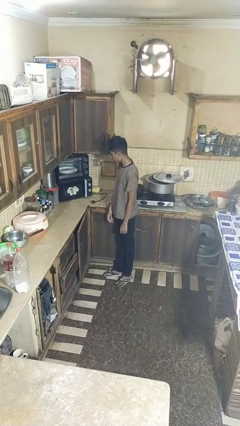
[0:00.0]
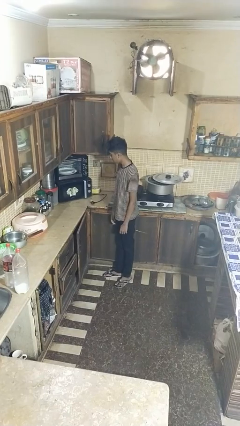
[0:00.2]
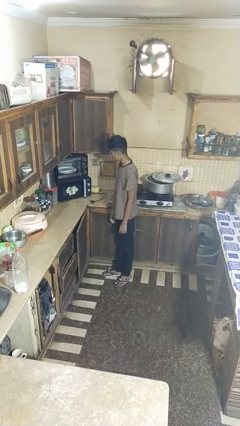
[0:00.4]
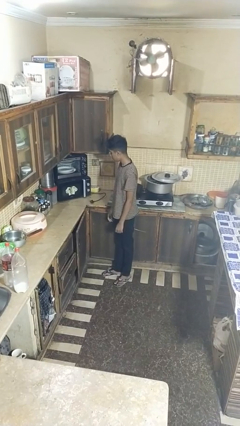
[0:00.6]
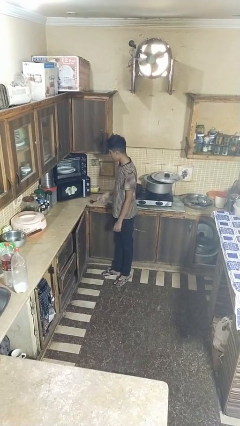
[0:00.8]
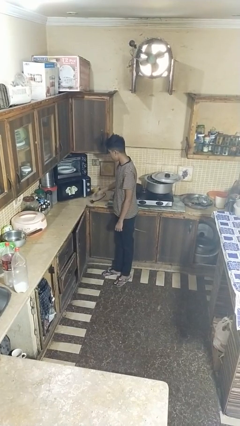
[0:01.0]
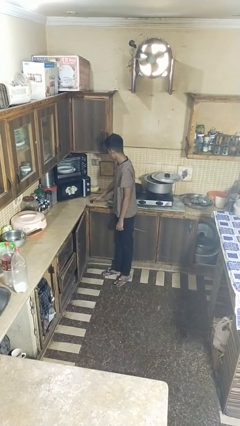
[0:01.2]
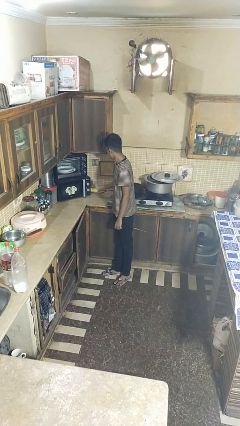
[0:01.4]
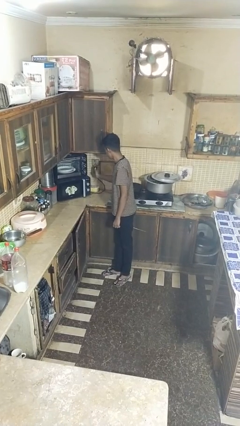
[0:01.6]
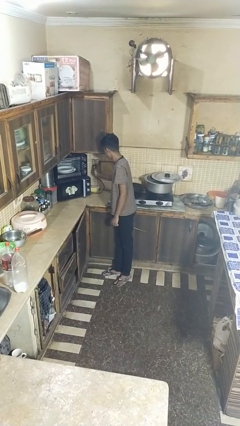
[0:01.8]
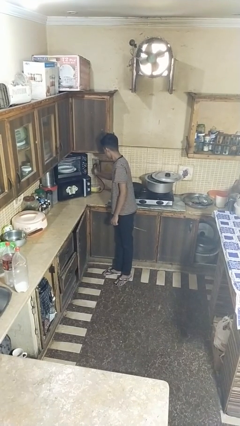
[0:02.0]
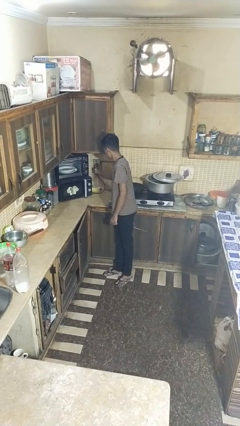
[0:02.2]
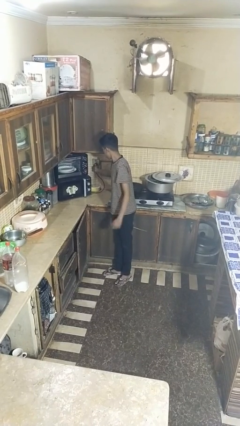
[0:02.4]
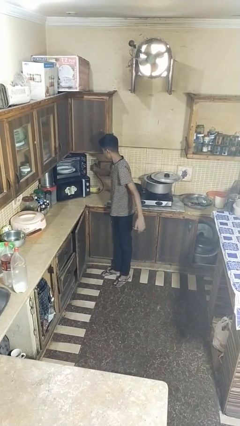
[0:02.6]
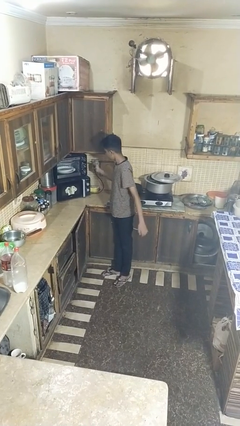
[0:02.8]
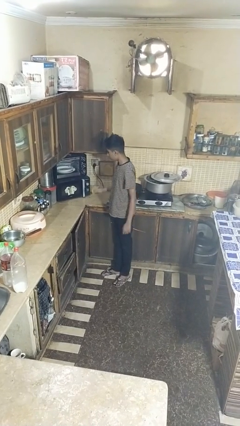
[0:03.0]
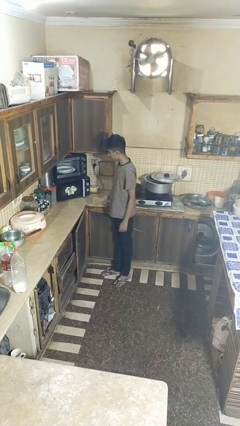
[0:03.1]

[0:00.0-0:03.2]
person plugs into electrical socket

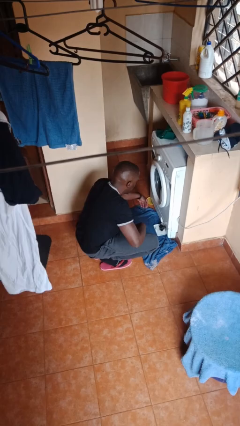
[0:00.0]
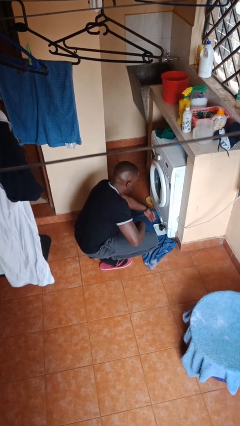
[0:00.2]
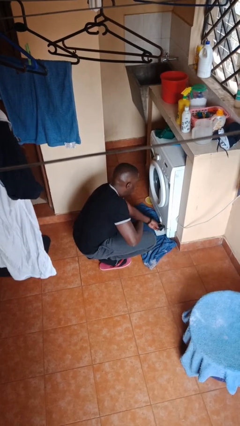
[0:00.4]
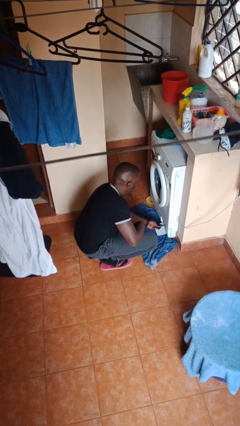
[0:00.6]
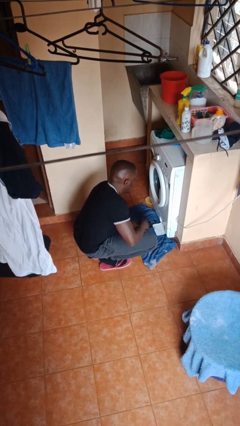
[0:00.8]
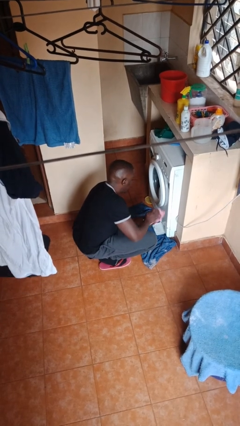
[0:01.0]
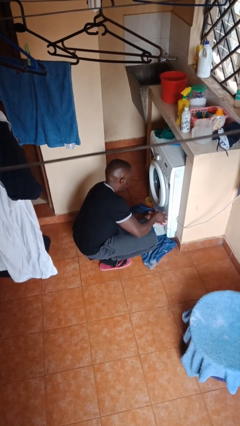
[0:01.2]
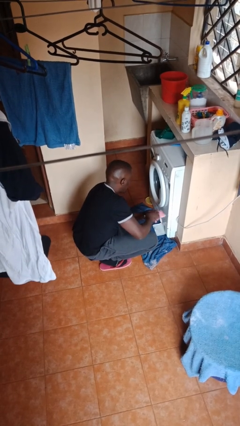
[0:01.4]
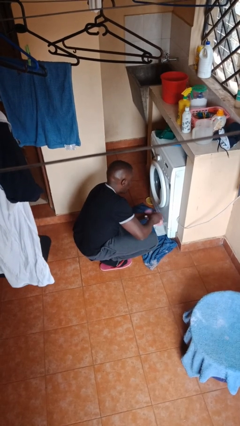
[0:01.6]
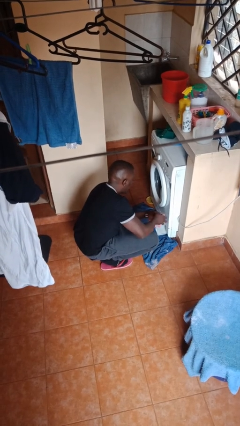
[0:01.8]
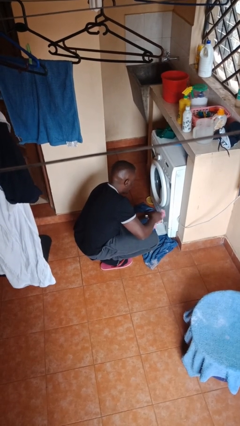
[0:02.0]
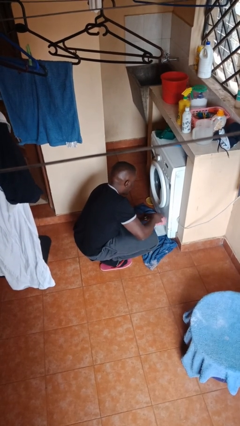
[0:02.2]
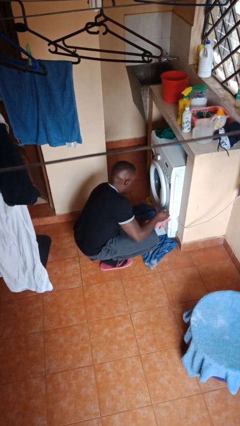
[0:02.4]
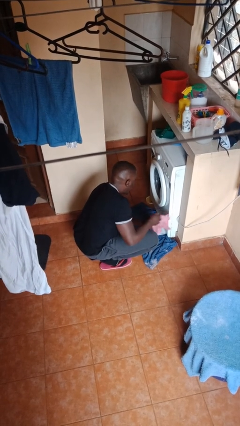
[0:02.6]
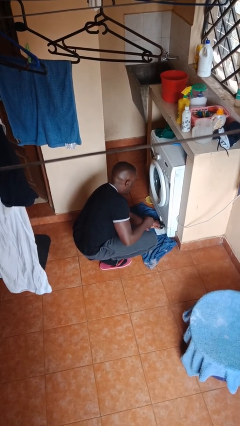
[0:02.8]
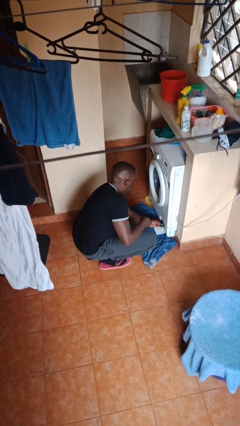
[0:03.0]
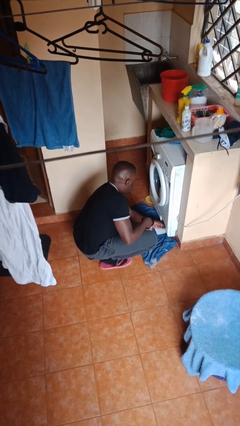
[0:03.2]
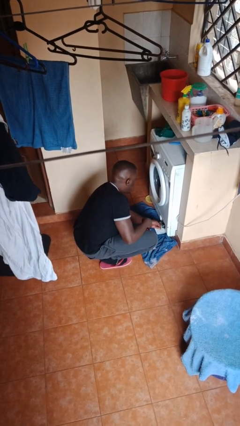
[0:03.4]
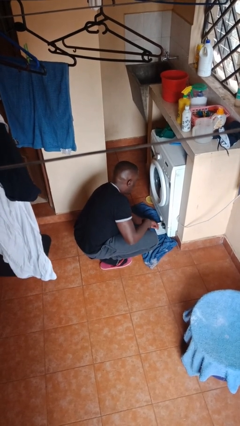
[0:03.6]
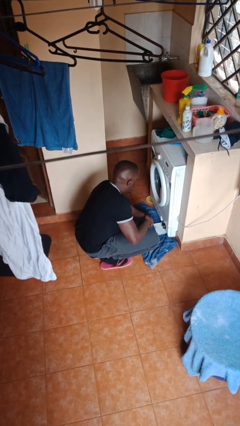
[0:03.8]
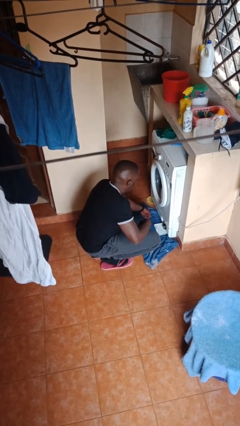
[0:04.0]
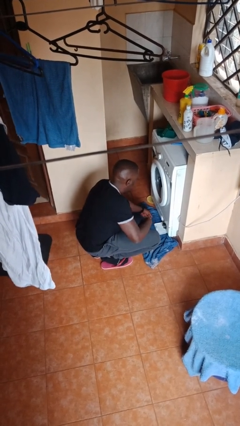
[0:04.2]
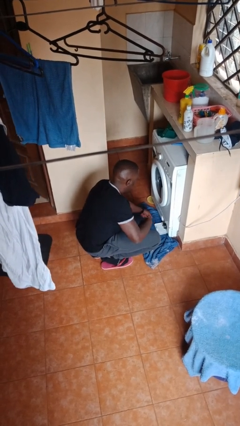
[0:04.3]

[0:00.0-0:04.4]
person cleans dryer lint trap

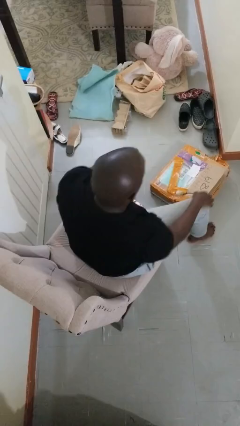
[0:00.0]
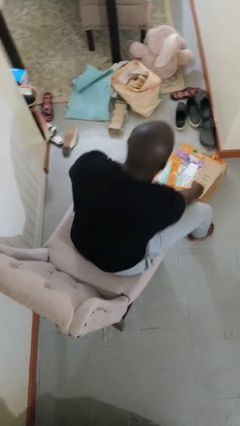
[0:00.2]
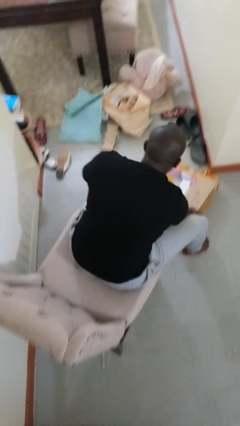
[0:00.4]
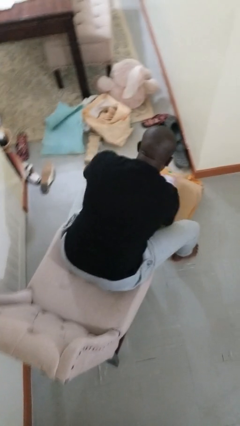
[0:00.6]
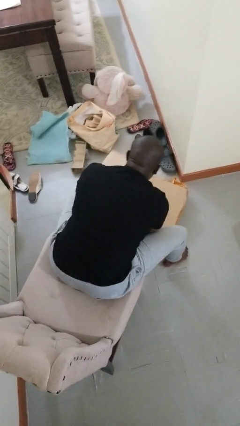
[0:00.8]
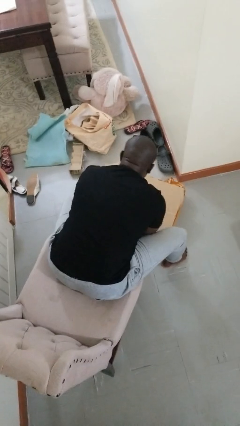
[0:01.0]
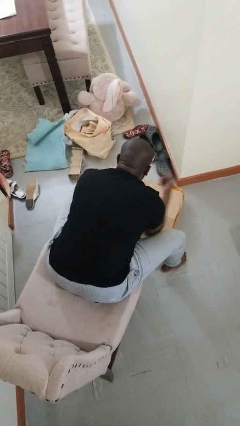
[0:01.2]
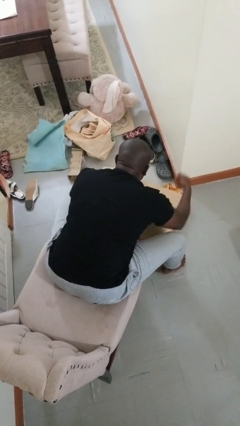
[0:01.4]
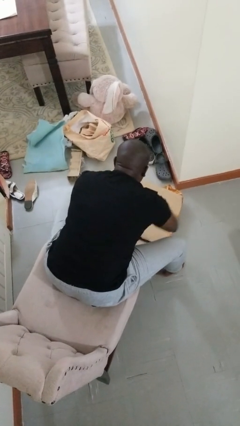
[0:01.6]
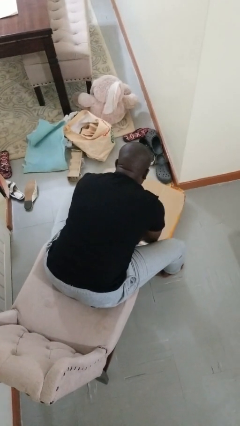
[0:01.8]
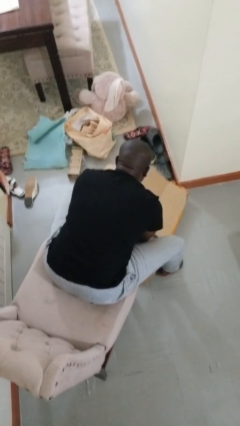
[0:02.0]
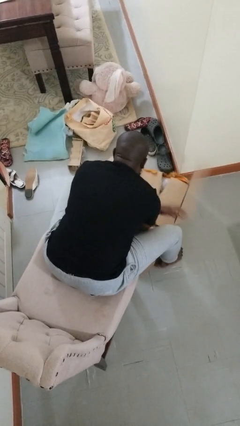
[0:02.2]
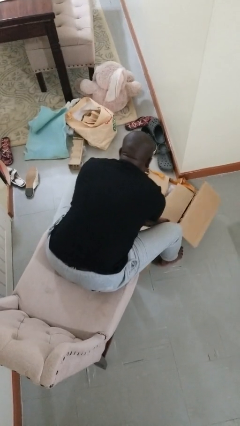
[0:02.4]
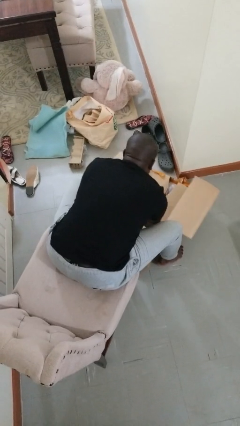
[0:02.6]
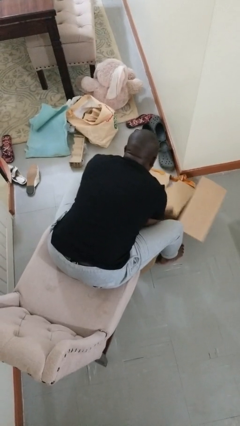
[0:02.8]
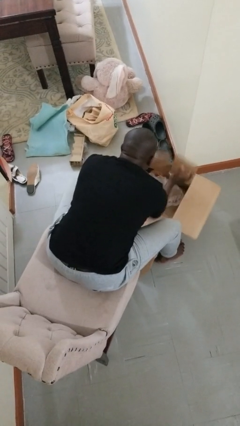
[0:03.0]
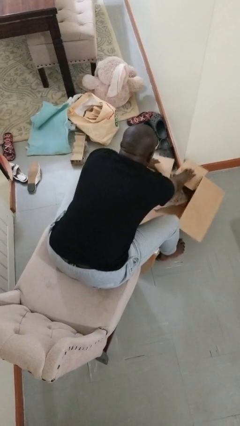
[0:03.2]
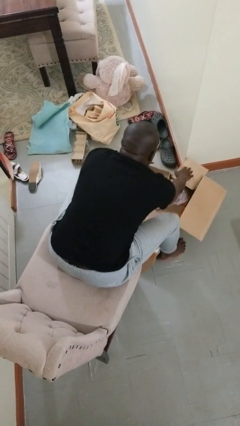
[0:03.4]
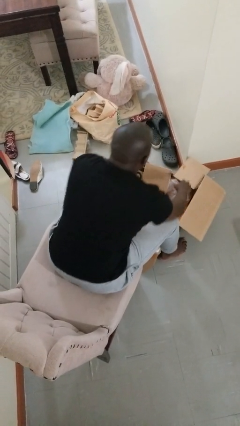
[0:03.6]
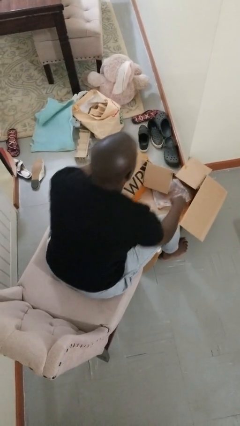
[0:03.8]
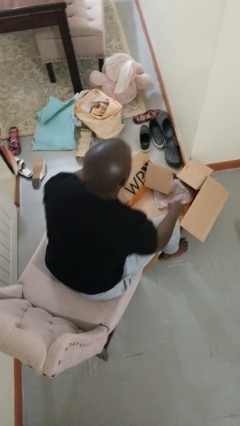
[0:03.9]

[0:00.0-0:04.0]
person opens box

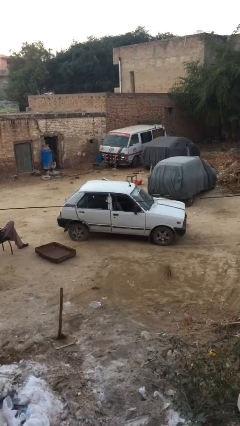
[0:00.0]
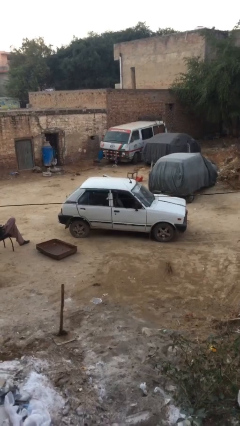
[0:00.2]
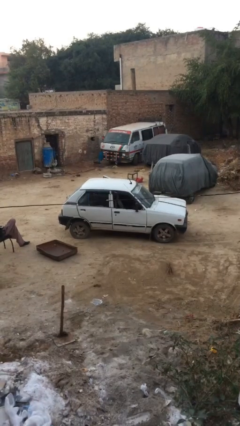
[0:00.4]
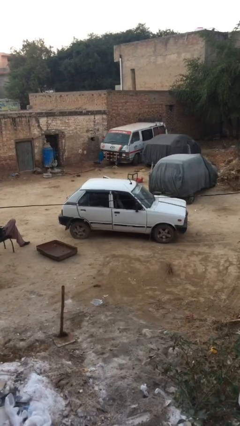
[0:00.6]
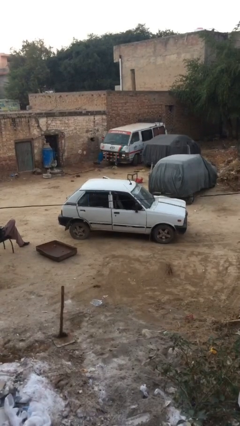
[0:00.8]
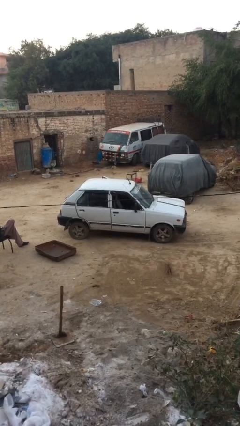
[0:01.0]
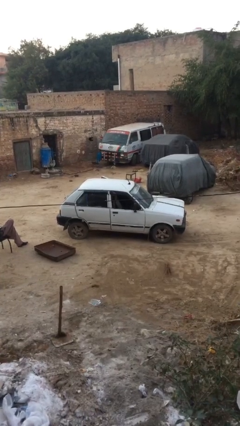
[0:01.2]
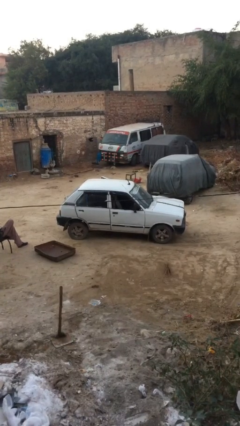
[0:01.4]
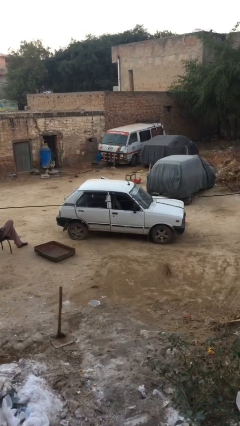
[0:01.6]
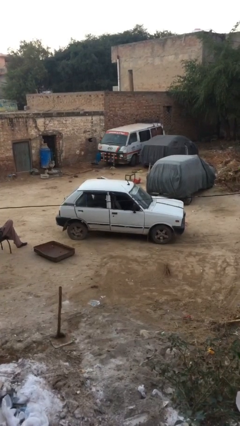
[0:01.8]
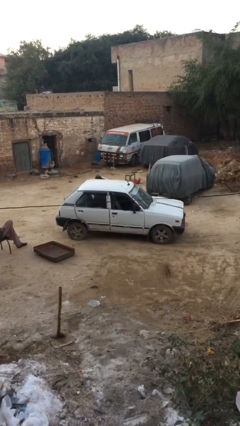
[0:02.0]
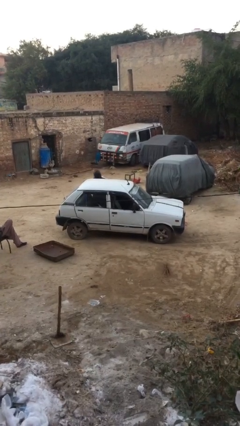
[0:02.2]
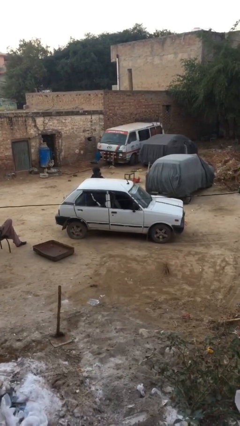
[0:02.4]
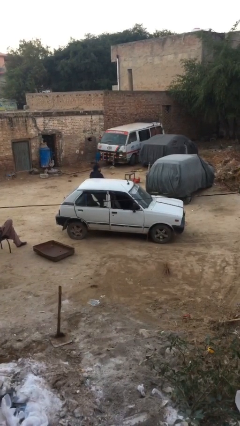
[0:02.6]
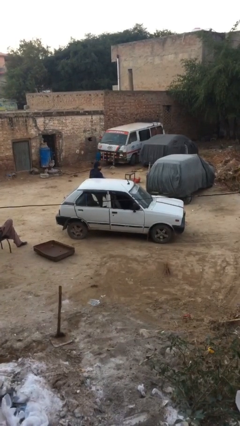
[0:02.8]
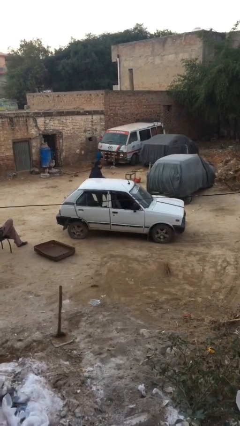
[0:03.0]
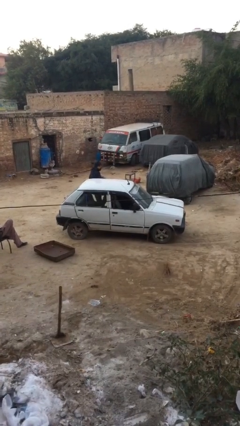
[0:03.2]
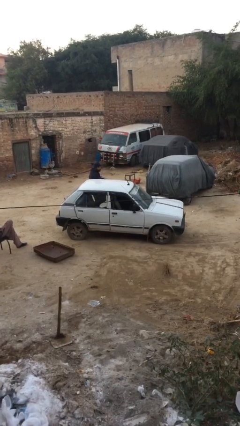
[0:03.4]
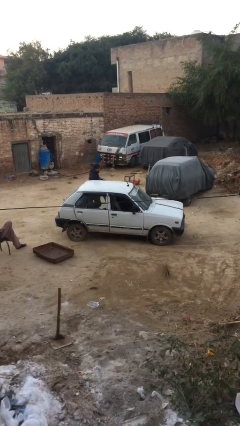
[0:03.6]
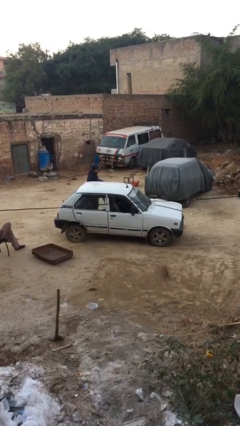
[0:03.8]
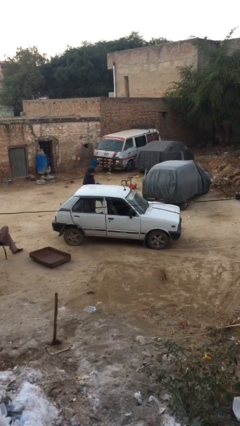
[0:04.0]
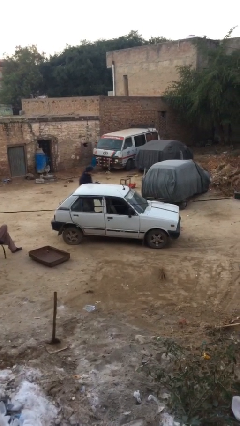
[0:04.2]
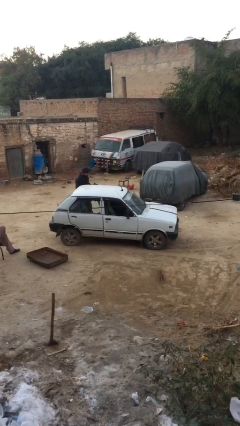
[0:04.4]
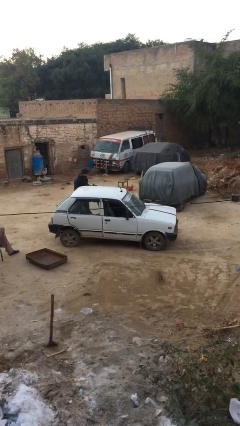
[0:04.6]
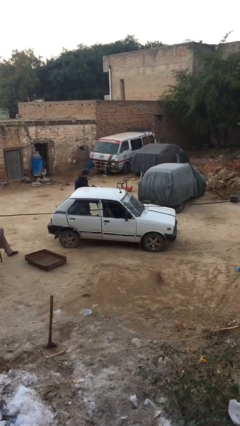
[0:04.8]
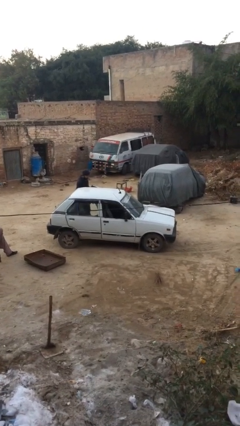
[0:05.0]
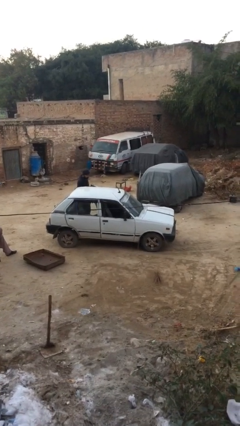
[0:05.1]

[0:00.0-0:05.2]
person exits car

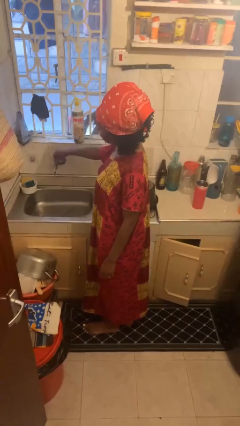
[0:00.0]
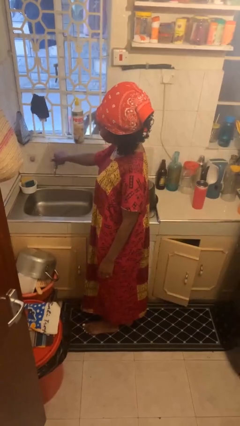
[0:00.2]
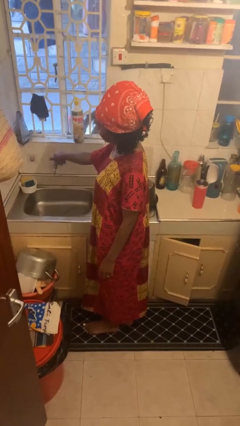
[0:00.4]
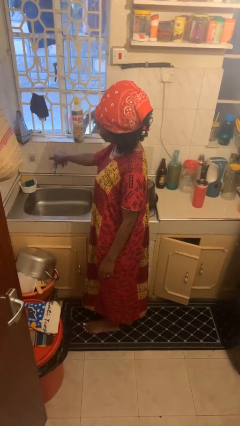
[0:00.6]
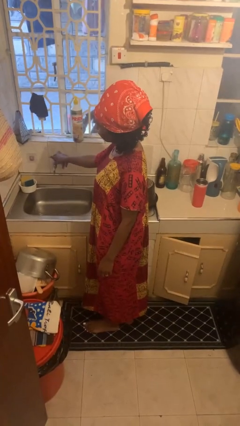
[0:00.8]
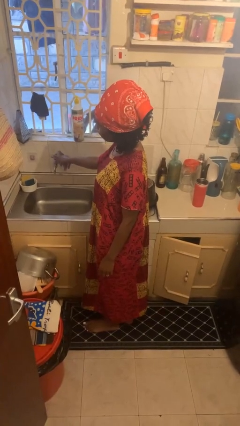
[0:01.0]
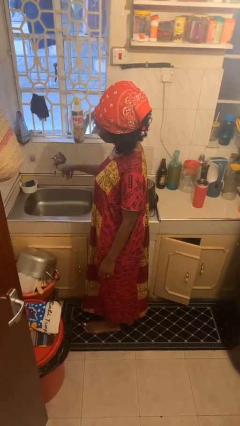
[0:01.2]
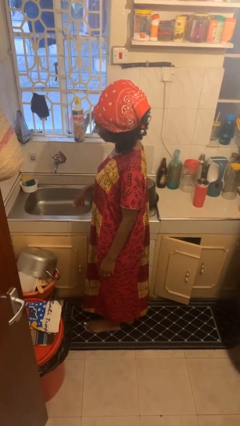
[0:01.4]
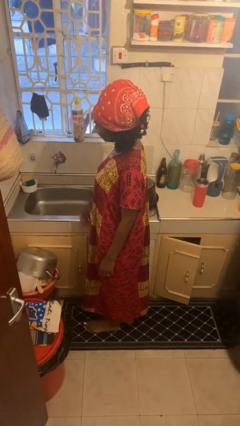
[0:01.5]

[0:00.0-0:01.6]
person turns off faucet
